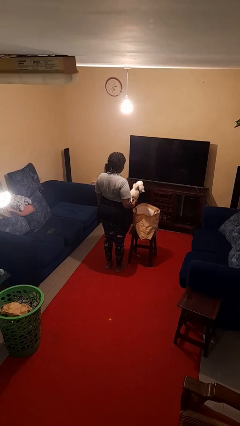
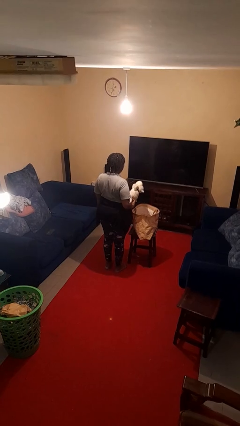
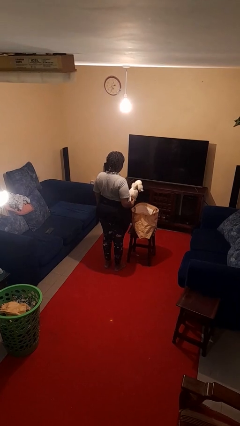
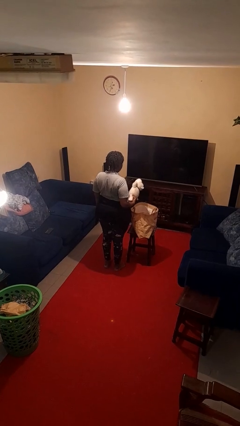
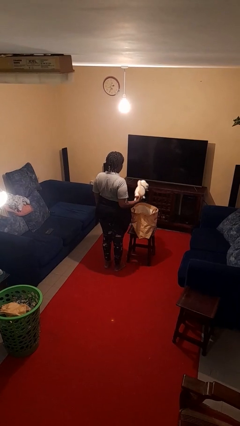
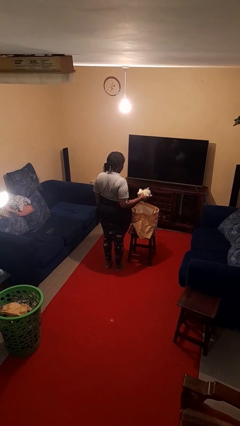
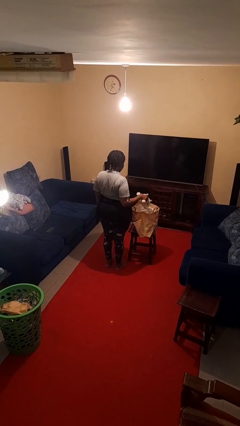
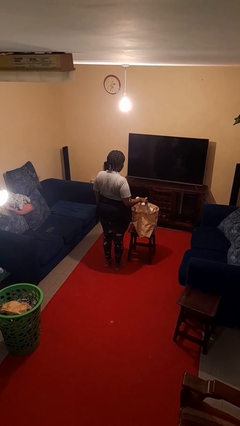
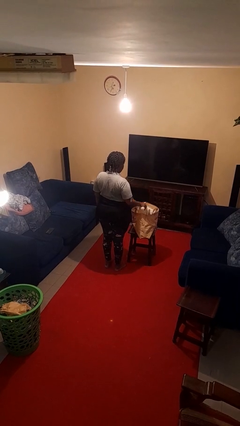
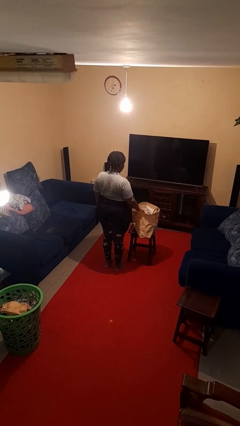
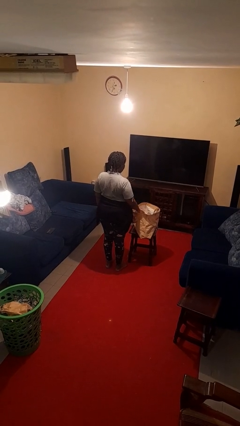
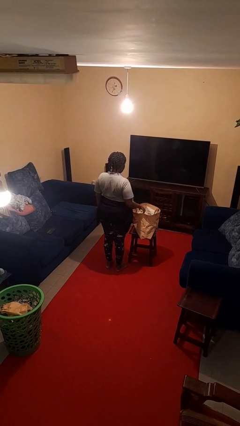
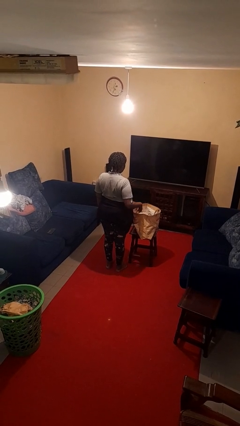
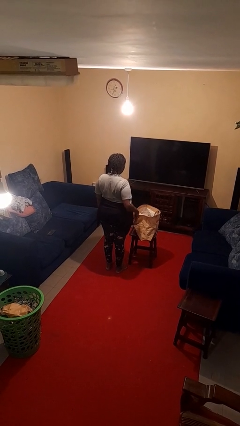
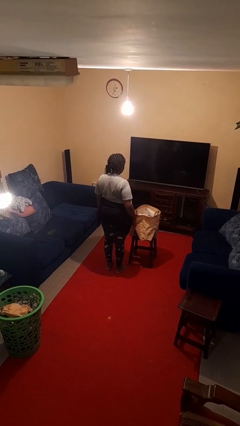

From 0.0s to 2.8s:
person puts object into bag

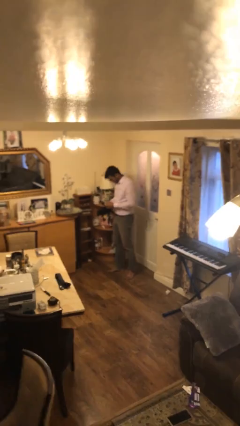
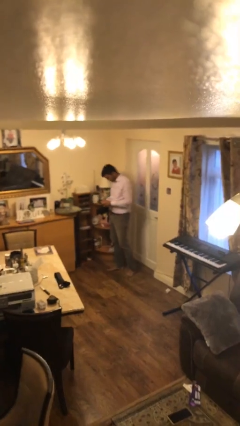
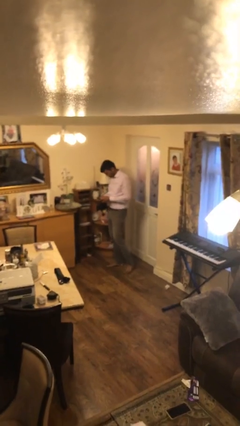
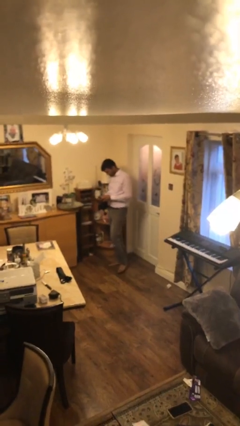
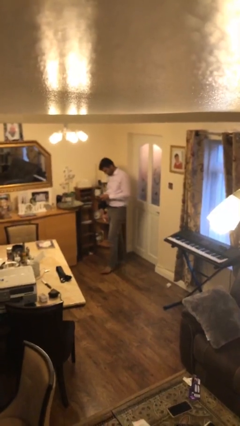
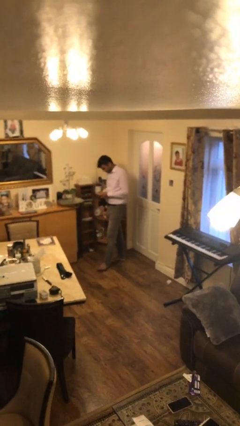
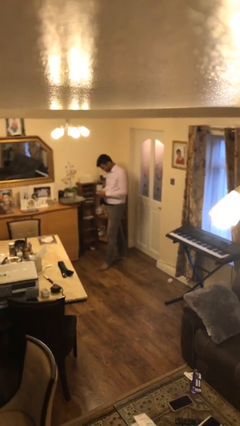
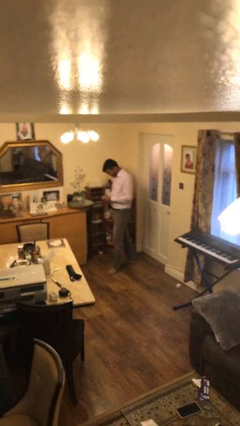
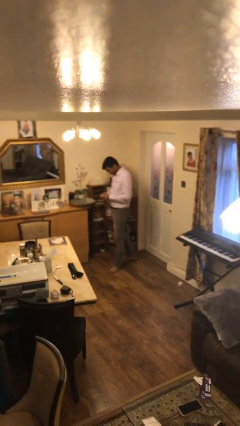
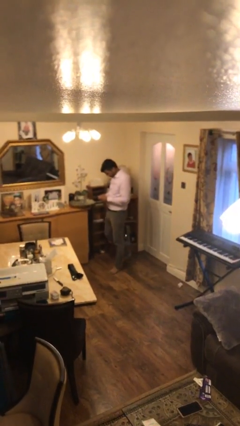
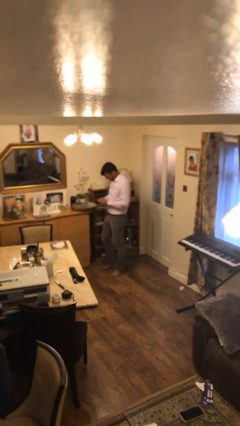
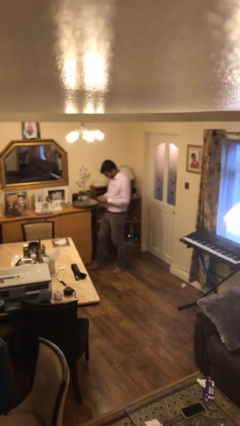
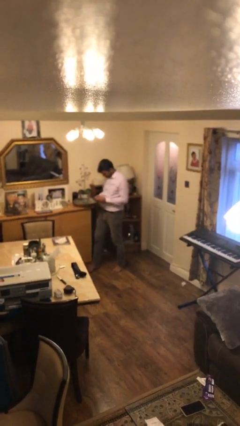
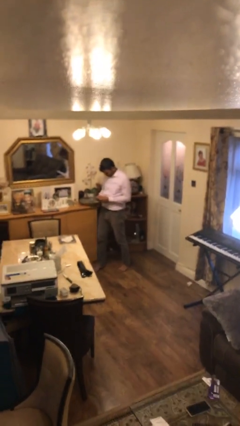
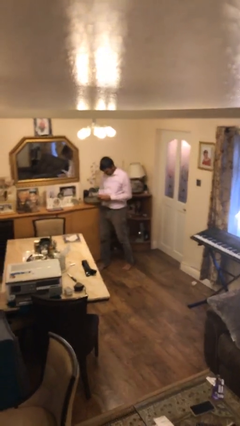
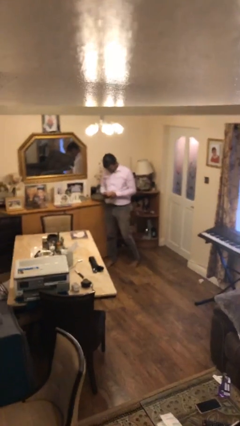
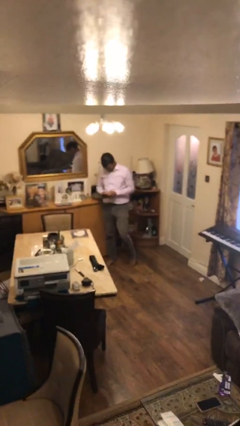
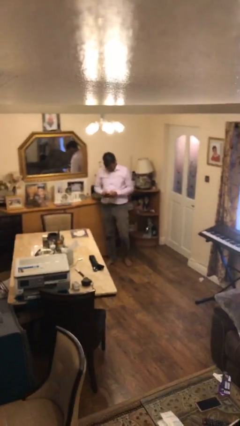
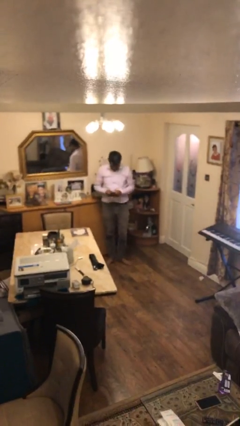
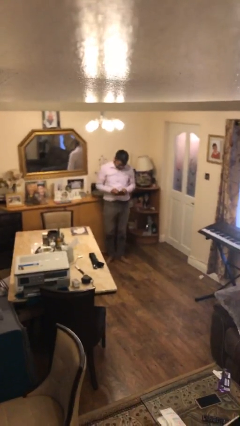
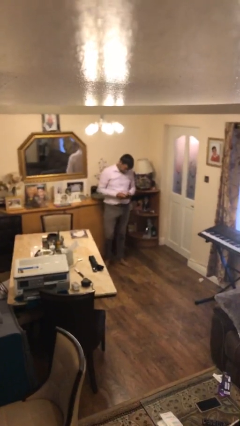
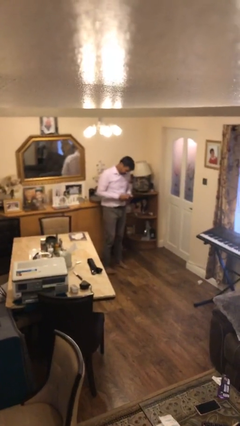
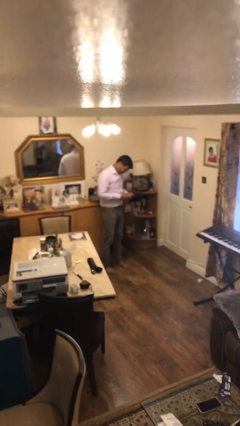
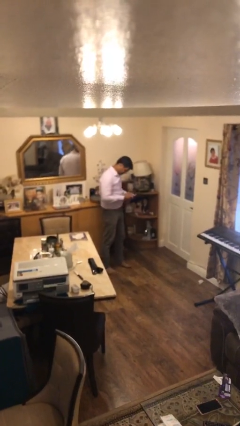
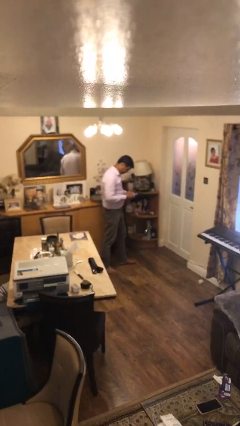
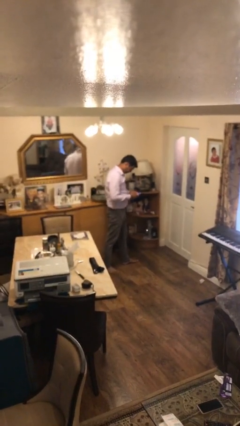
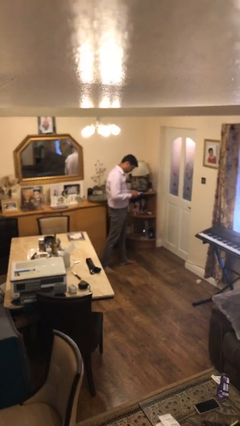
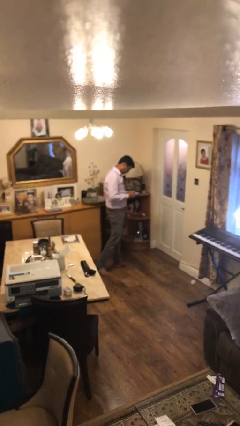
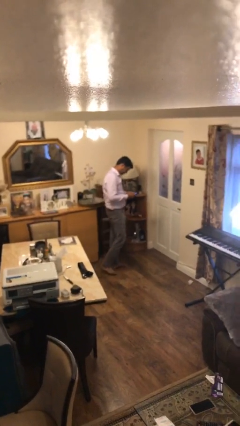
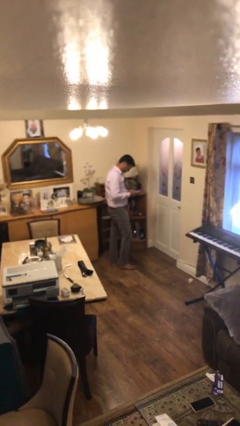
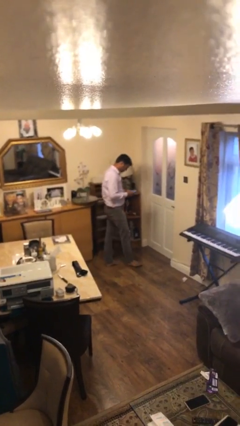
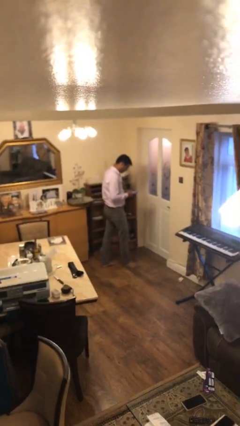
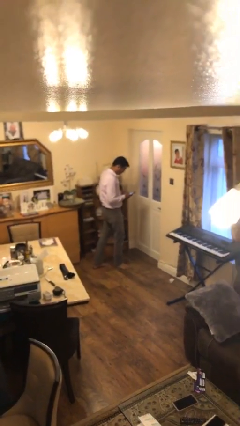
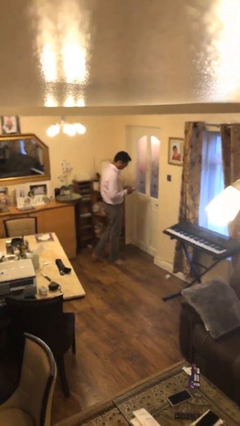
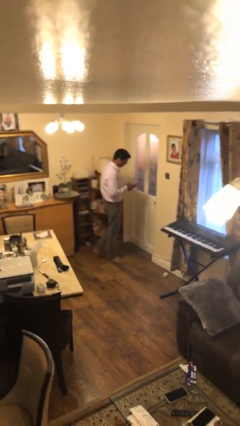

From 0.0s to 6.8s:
person texts on phone

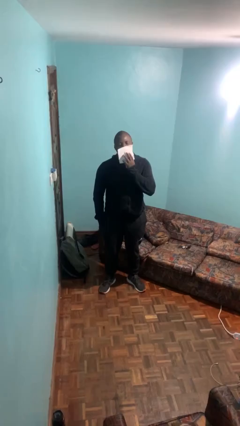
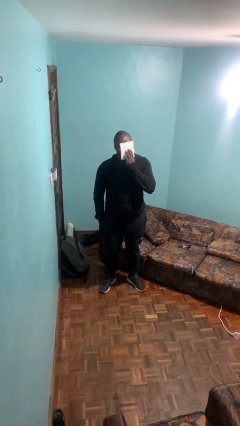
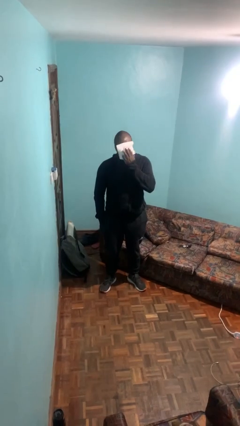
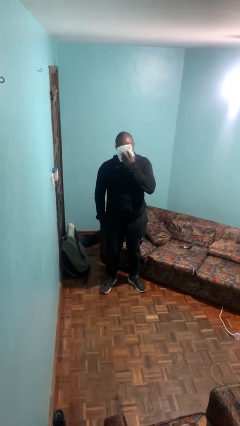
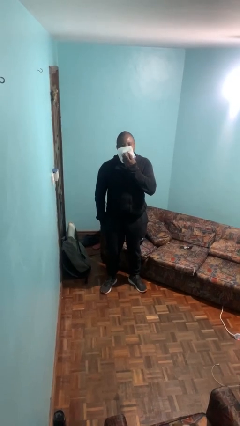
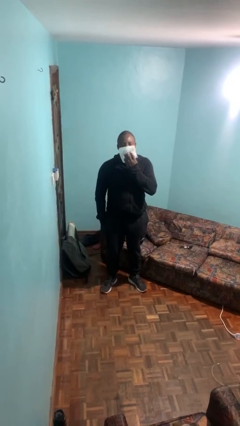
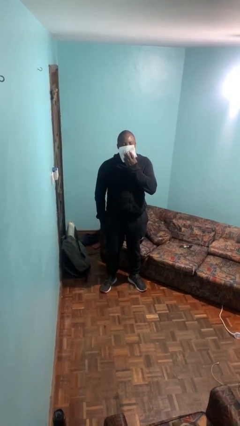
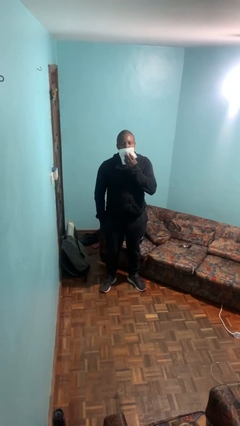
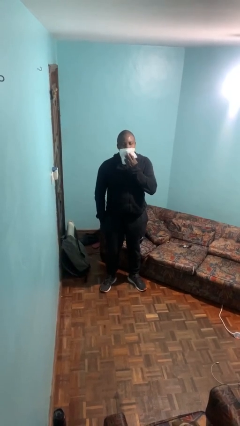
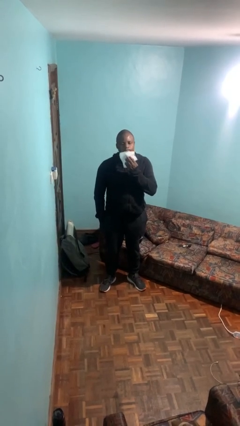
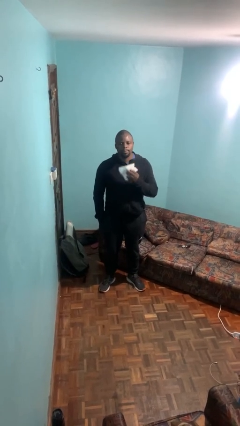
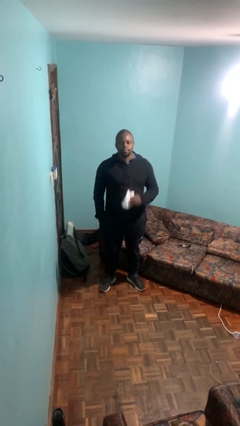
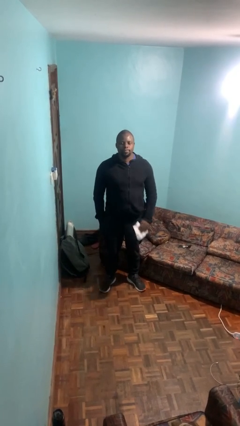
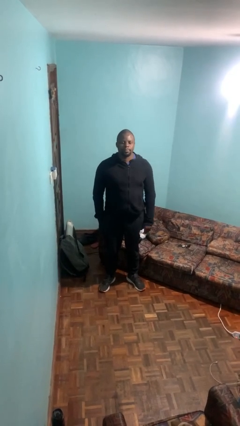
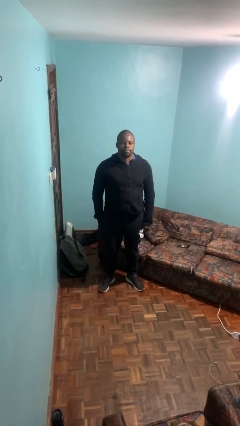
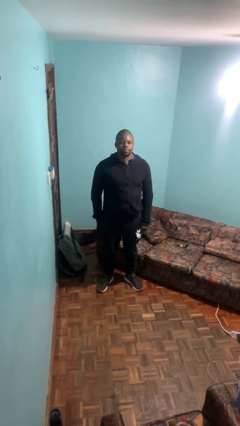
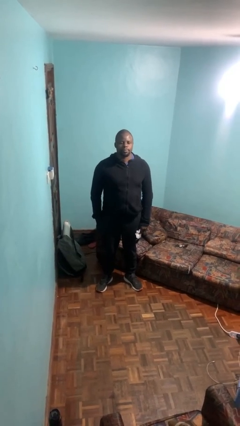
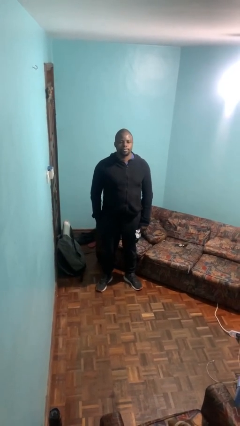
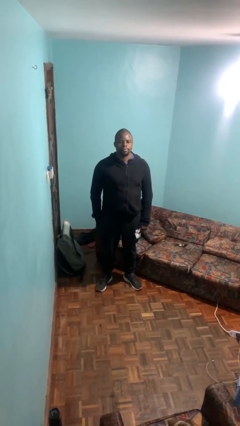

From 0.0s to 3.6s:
person wipes mouth with napkin

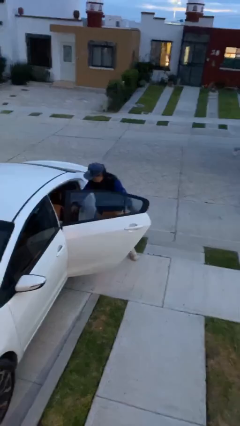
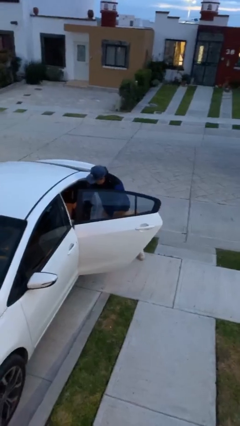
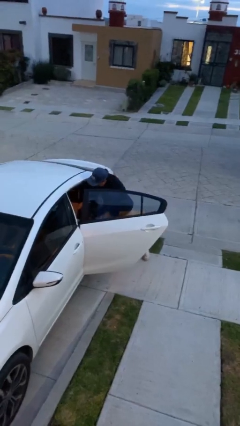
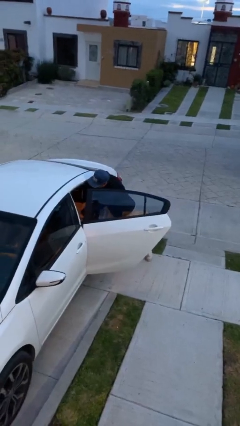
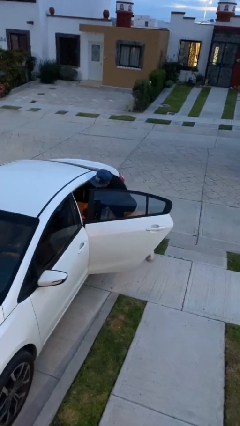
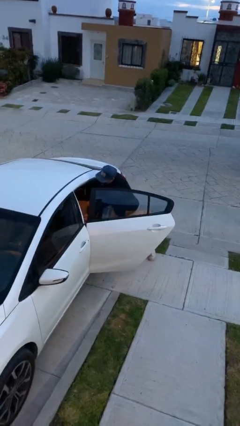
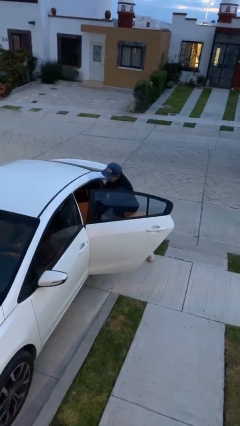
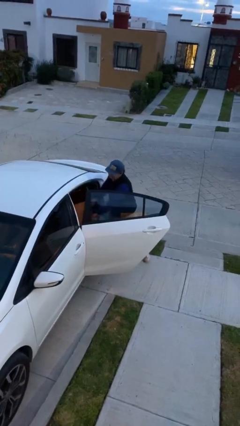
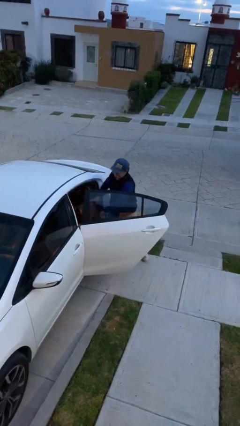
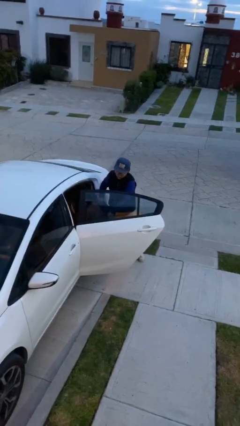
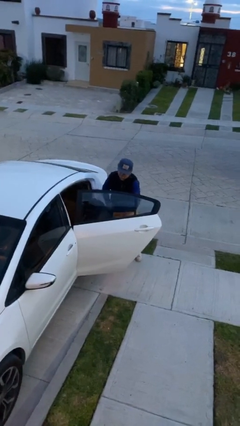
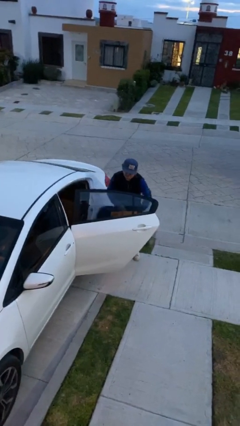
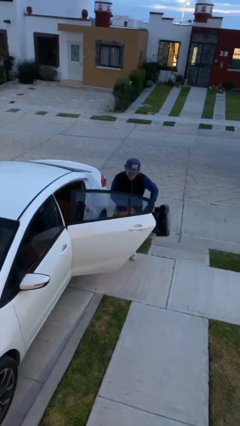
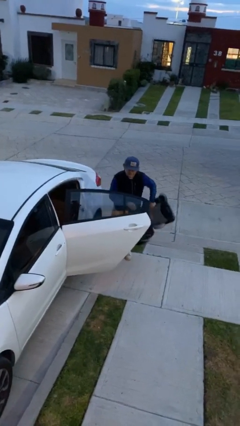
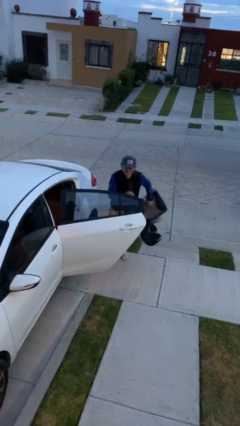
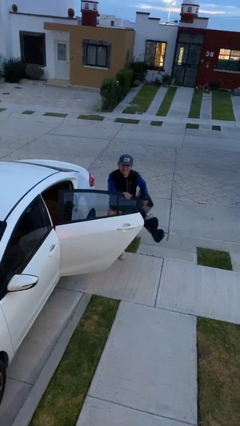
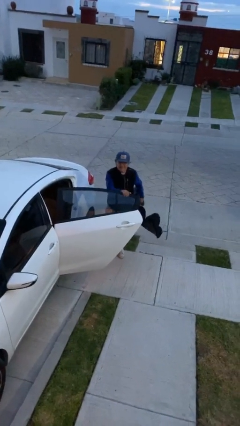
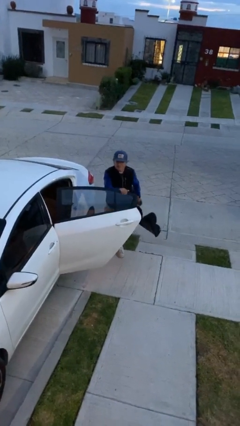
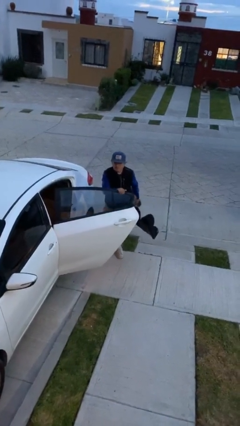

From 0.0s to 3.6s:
person unloads car

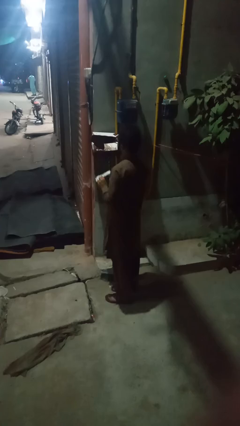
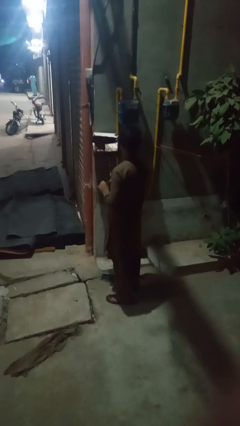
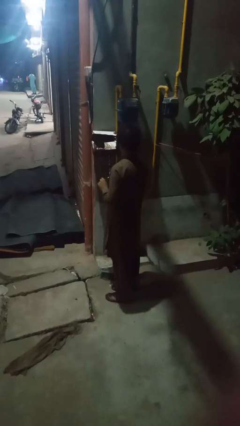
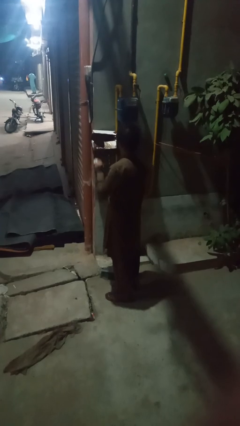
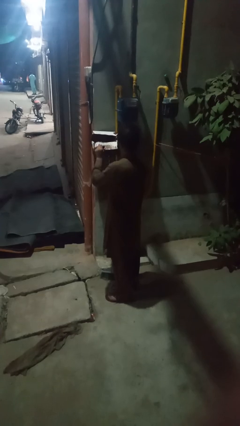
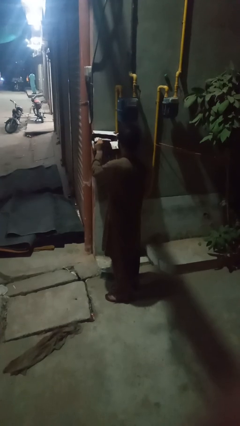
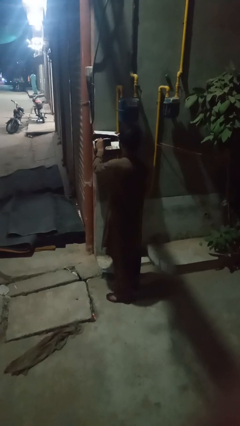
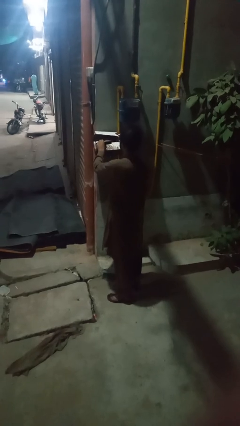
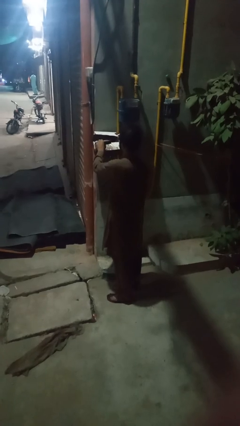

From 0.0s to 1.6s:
person takes letters from mailbox
